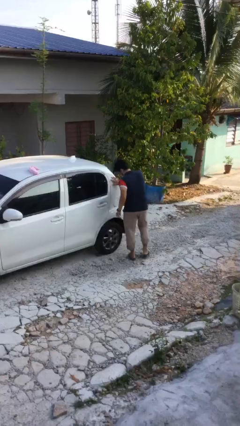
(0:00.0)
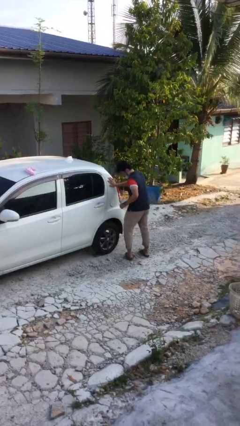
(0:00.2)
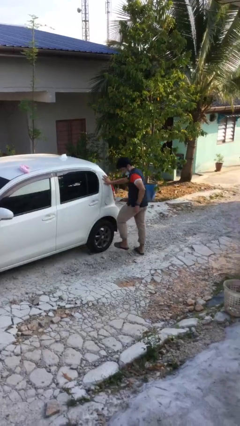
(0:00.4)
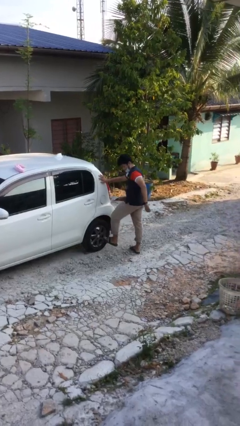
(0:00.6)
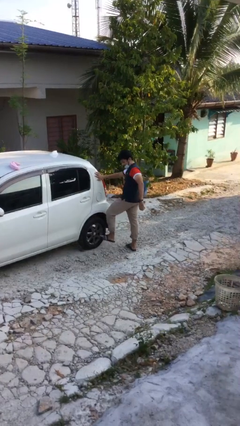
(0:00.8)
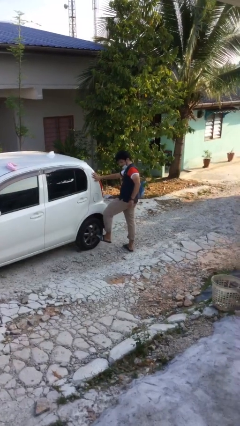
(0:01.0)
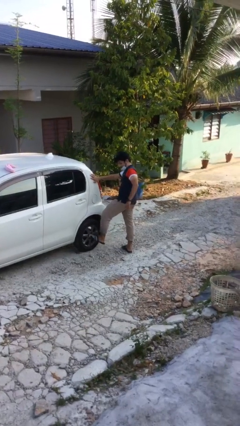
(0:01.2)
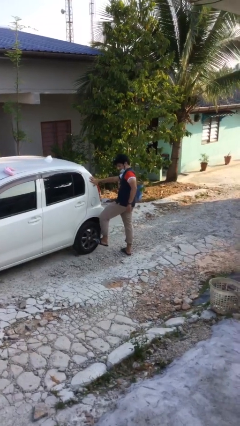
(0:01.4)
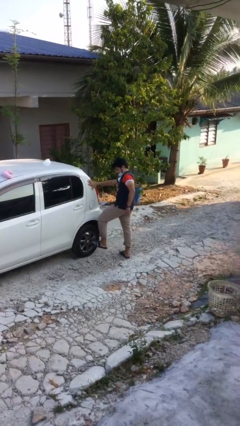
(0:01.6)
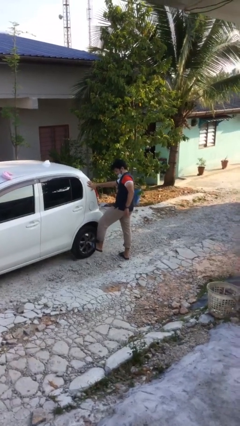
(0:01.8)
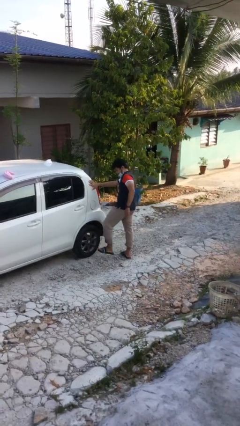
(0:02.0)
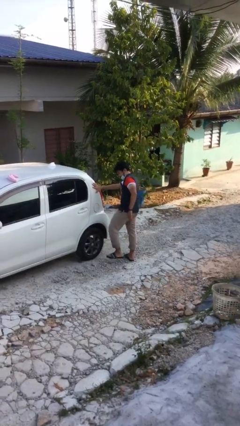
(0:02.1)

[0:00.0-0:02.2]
person kicks car tires

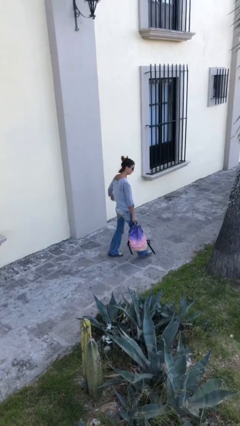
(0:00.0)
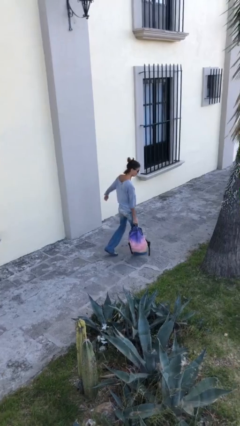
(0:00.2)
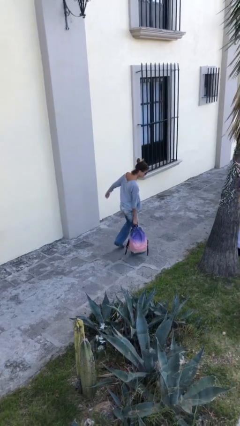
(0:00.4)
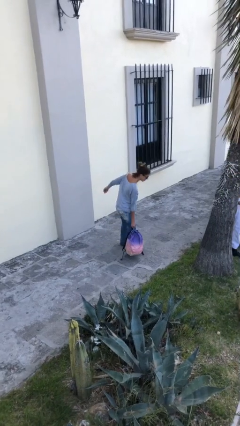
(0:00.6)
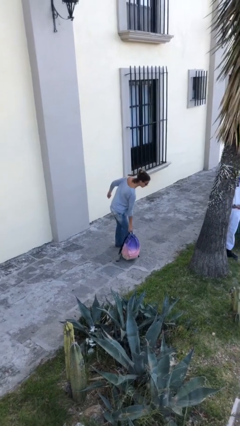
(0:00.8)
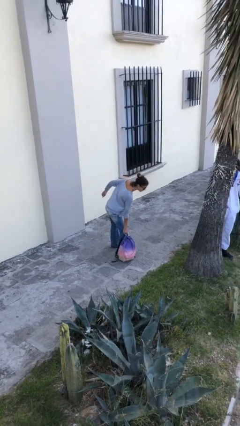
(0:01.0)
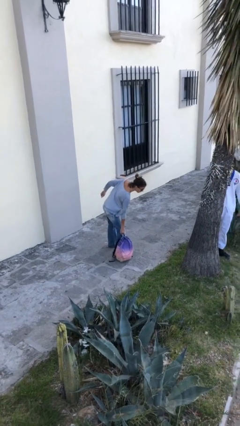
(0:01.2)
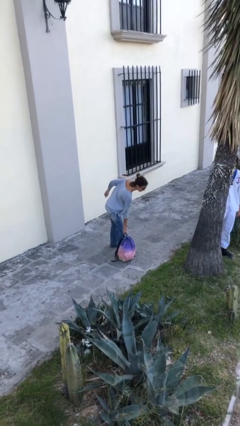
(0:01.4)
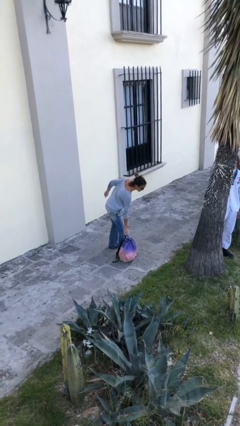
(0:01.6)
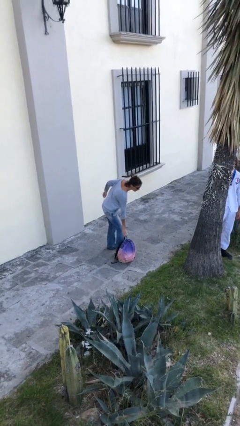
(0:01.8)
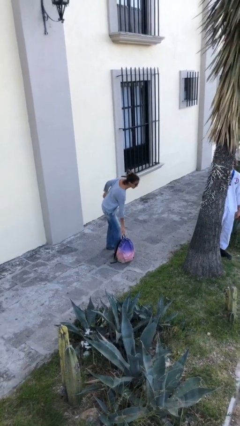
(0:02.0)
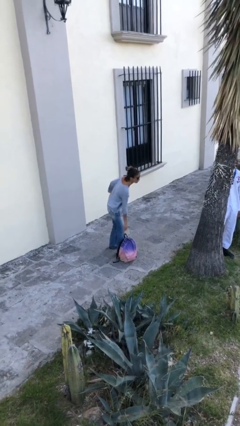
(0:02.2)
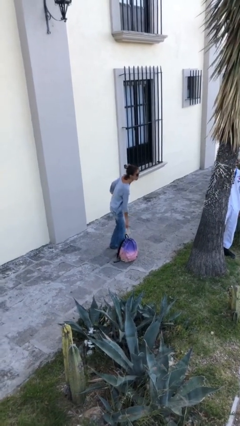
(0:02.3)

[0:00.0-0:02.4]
person puts down object on floor

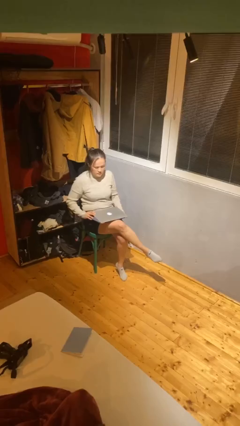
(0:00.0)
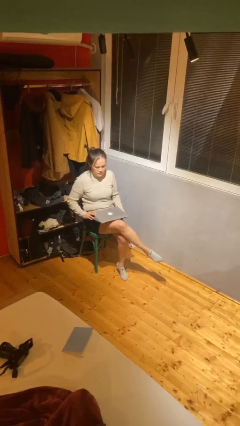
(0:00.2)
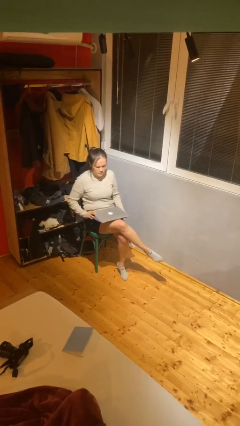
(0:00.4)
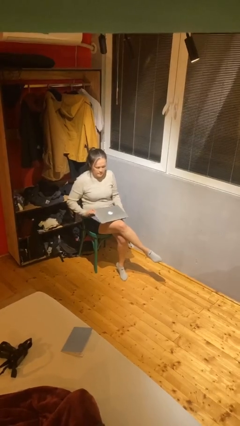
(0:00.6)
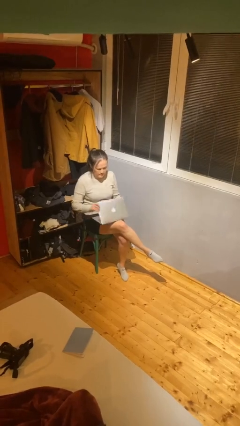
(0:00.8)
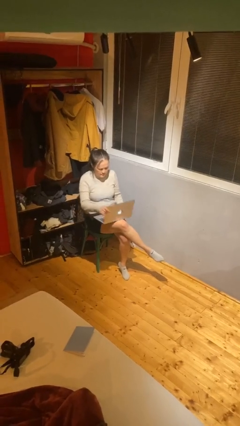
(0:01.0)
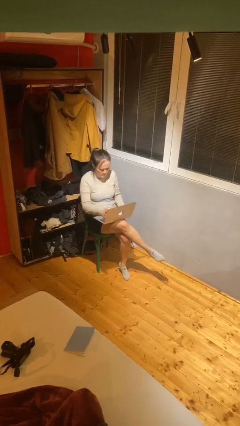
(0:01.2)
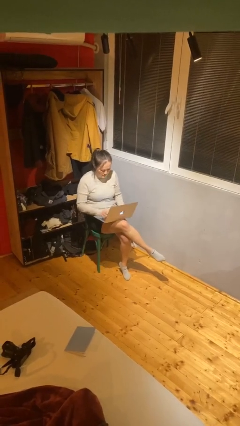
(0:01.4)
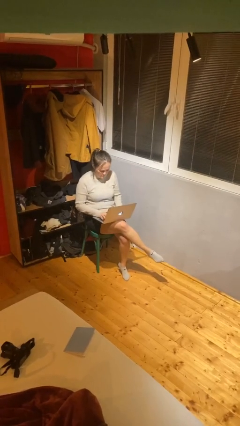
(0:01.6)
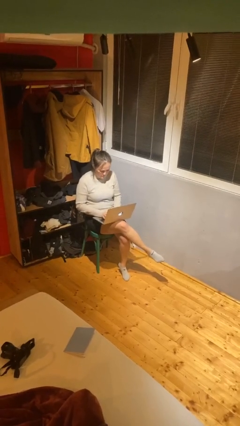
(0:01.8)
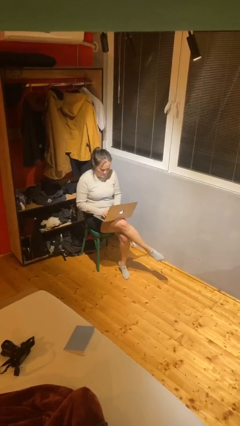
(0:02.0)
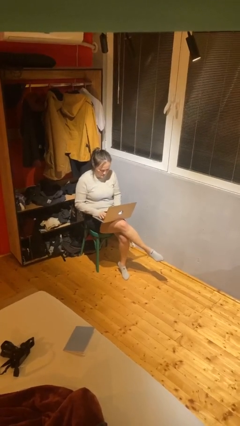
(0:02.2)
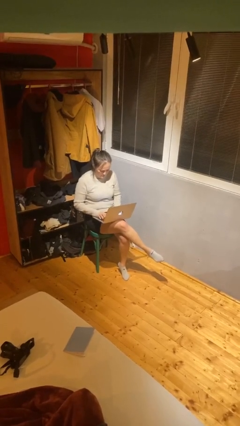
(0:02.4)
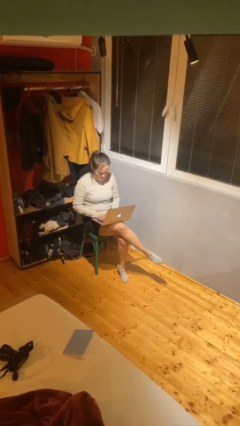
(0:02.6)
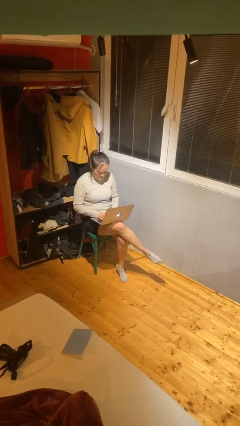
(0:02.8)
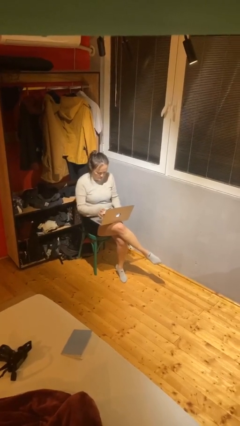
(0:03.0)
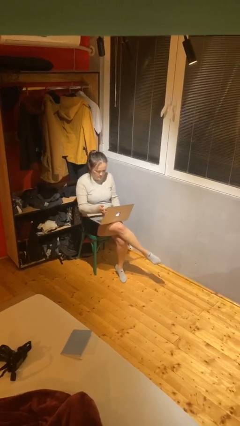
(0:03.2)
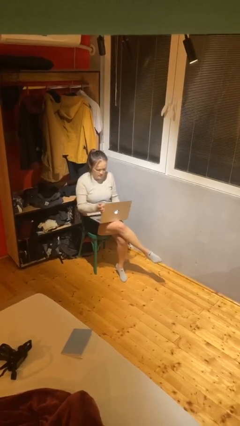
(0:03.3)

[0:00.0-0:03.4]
person interacts with laptop

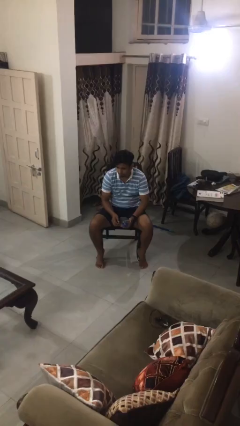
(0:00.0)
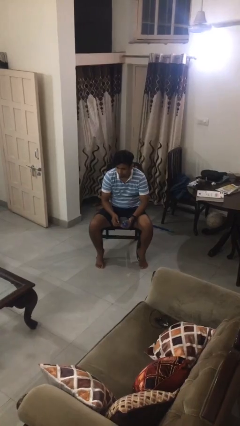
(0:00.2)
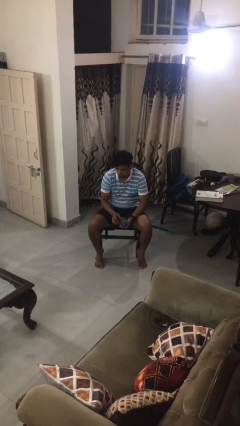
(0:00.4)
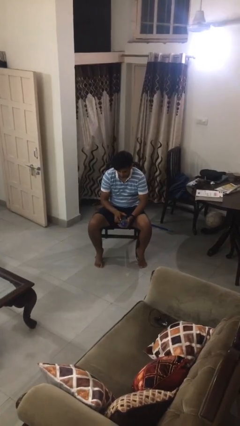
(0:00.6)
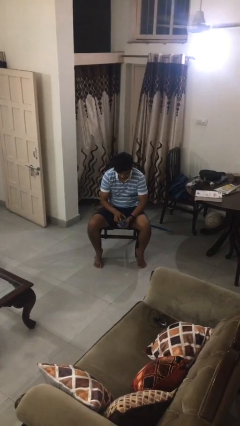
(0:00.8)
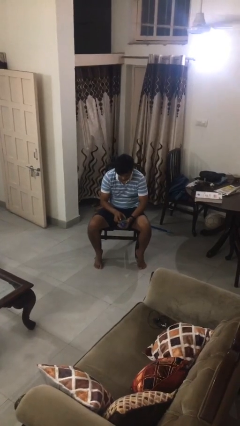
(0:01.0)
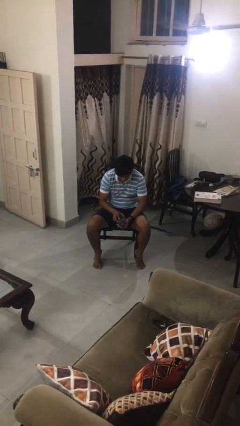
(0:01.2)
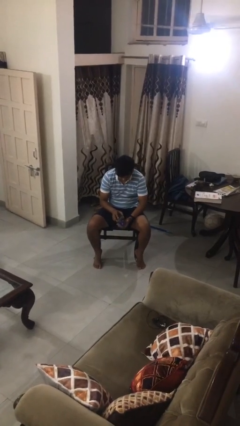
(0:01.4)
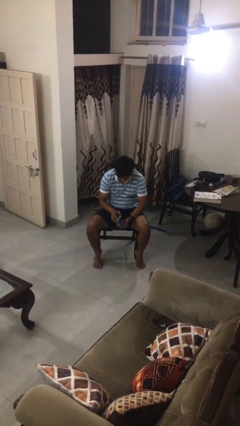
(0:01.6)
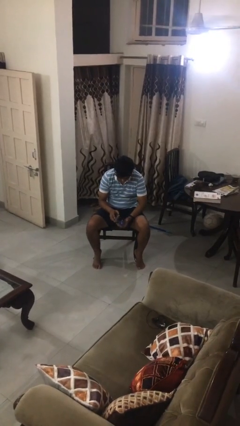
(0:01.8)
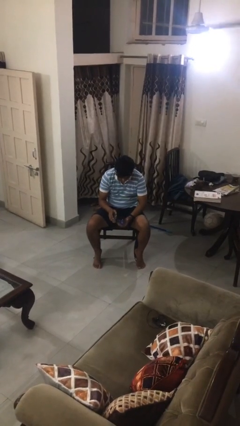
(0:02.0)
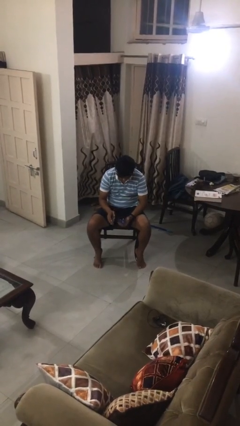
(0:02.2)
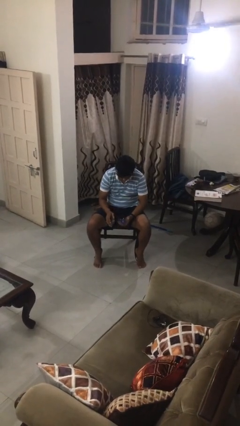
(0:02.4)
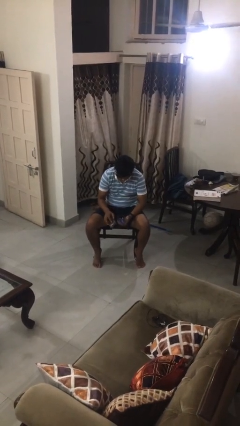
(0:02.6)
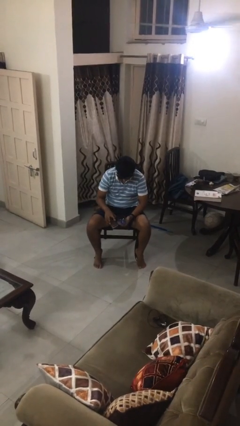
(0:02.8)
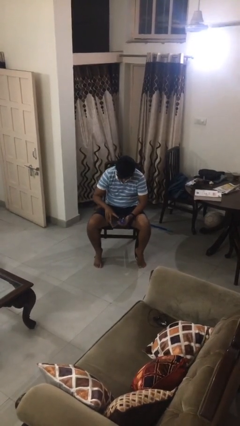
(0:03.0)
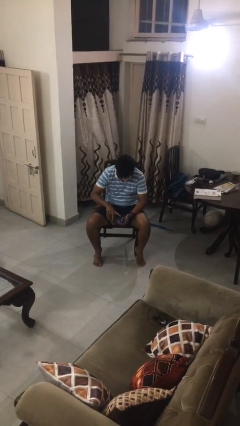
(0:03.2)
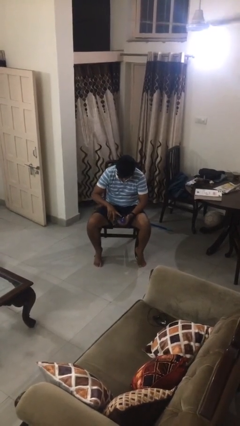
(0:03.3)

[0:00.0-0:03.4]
person opens jewelry box

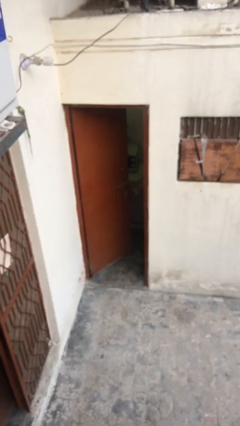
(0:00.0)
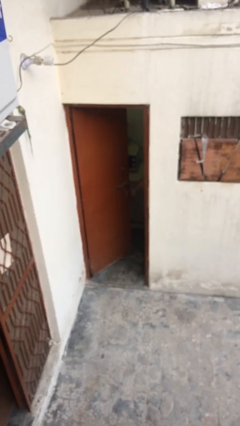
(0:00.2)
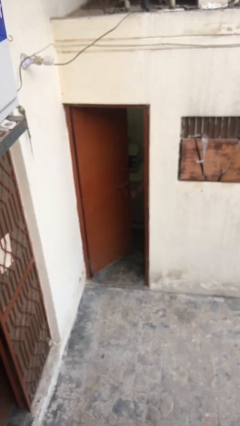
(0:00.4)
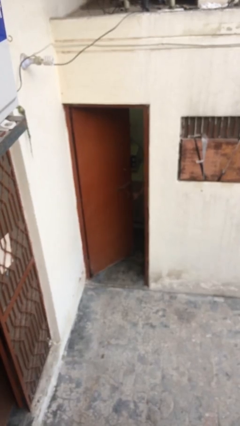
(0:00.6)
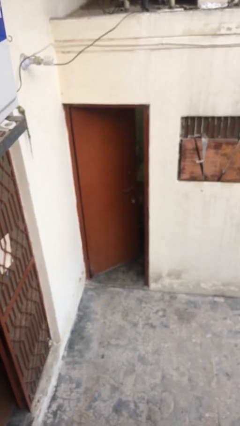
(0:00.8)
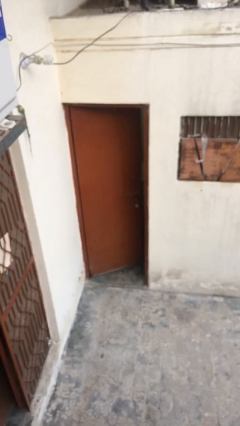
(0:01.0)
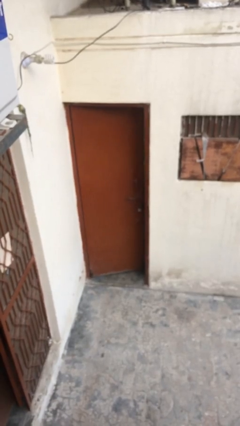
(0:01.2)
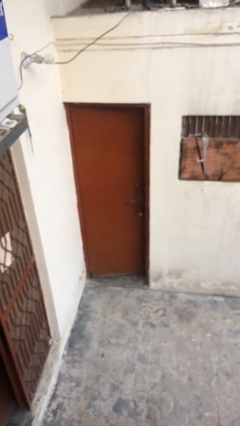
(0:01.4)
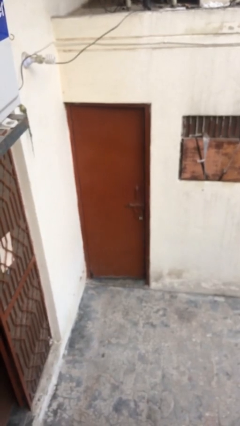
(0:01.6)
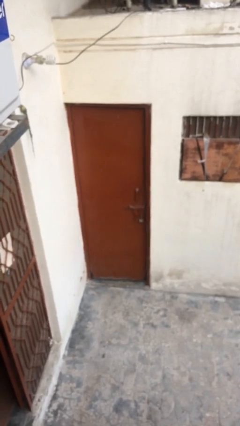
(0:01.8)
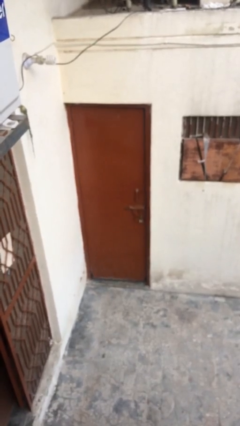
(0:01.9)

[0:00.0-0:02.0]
person closes facility door

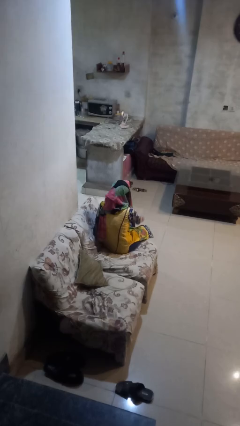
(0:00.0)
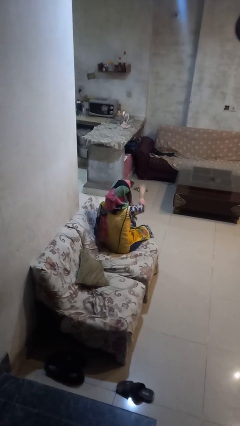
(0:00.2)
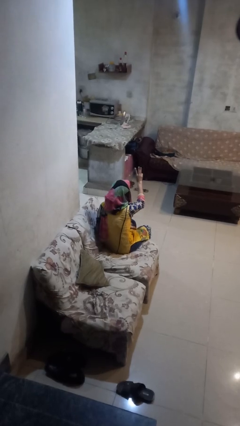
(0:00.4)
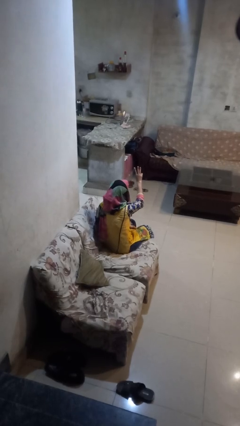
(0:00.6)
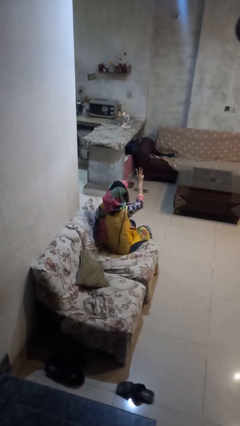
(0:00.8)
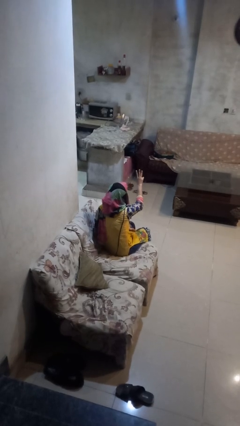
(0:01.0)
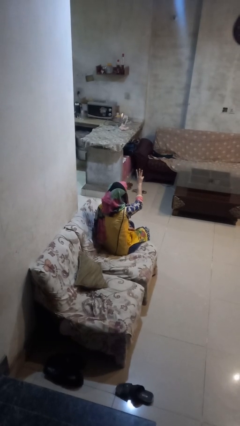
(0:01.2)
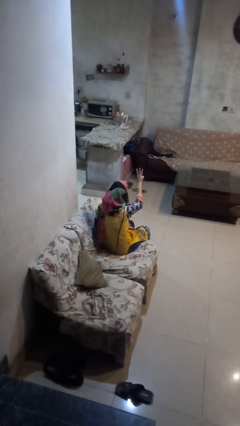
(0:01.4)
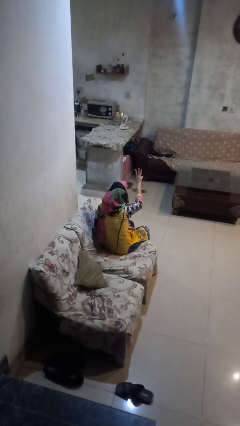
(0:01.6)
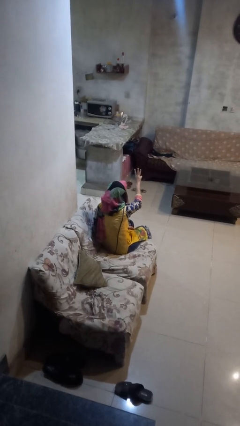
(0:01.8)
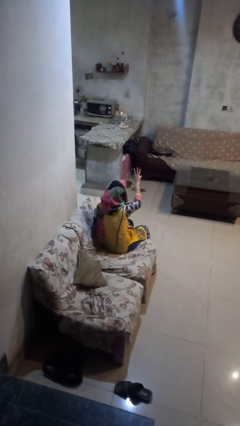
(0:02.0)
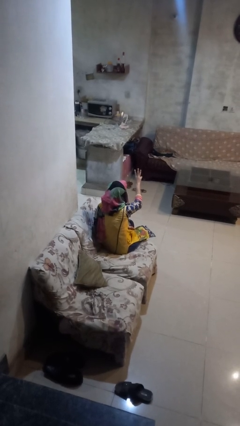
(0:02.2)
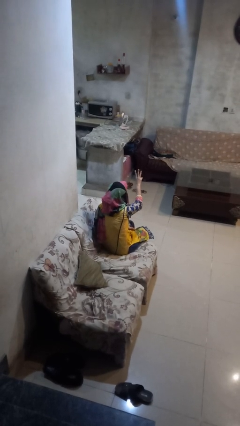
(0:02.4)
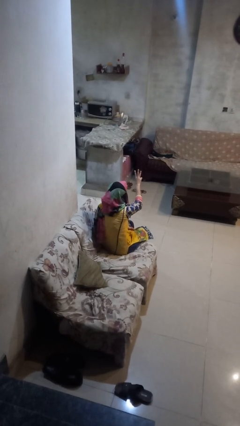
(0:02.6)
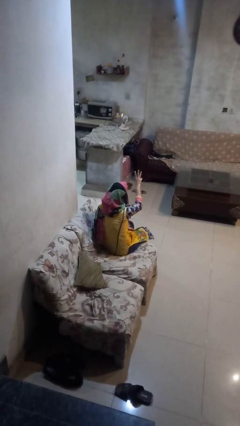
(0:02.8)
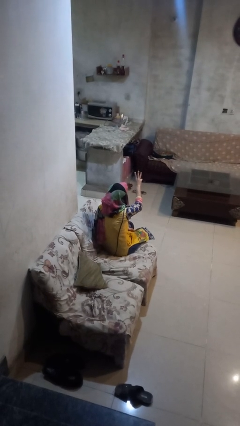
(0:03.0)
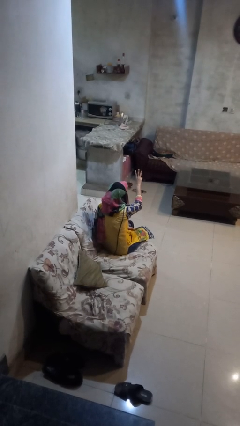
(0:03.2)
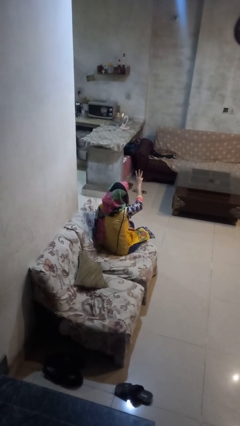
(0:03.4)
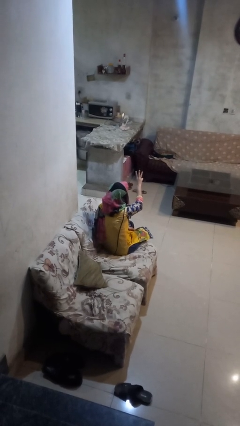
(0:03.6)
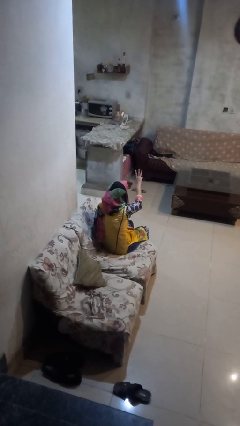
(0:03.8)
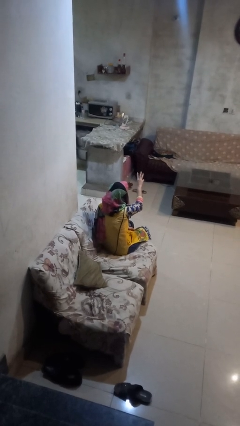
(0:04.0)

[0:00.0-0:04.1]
person gestures number three
